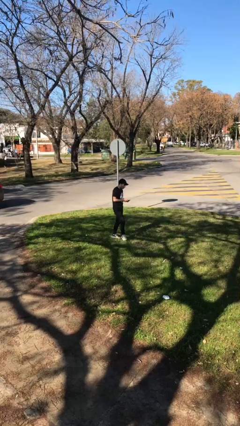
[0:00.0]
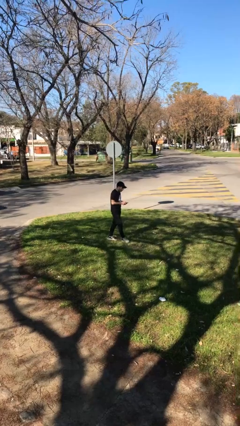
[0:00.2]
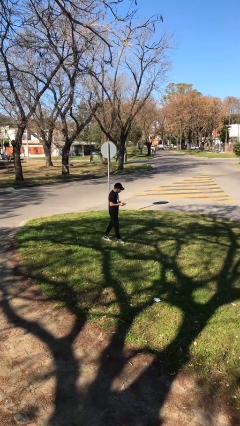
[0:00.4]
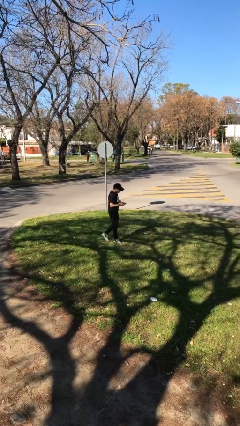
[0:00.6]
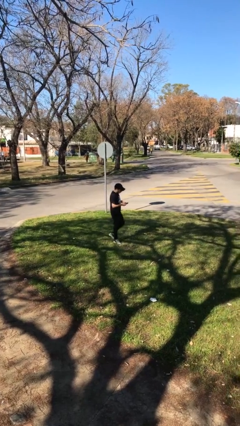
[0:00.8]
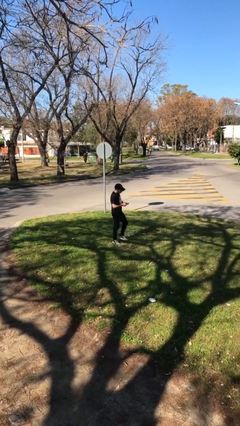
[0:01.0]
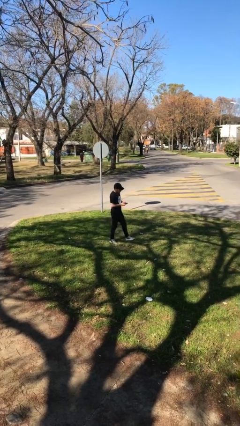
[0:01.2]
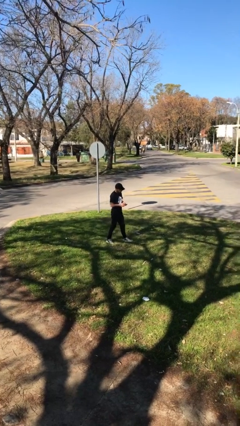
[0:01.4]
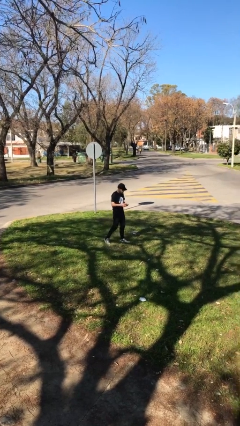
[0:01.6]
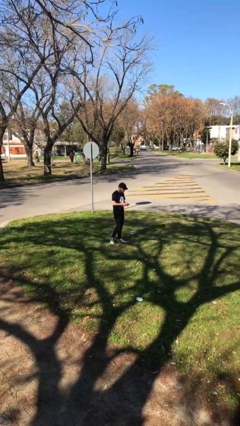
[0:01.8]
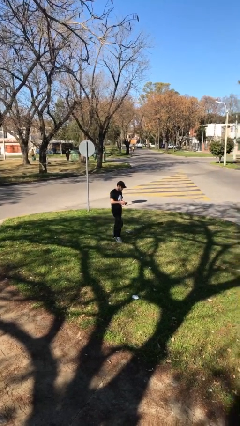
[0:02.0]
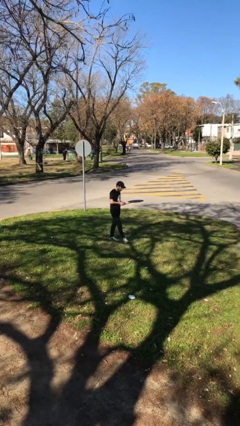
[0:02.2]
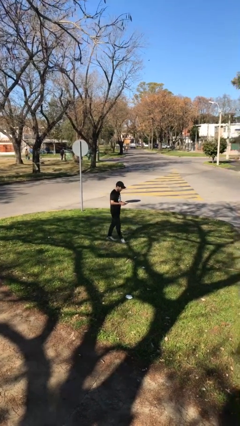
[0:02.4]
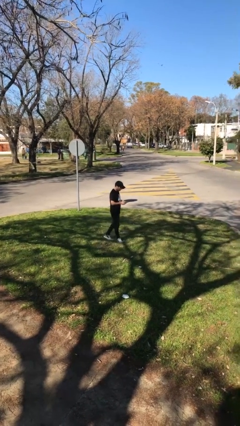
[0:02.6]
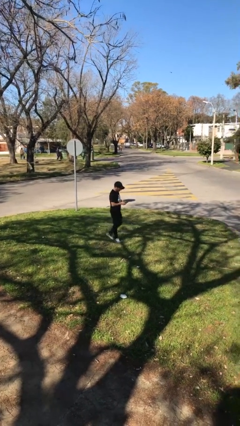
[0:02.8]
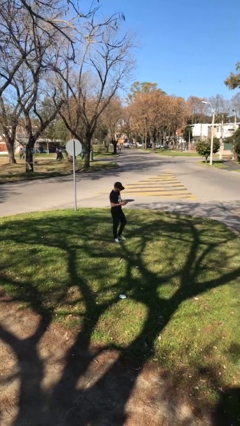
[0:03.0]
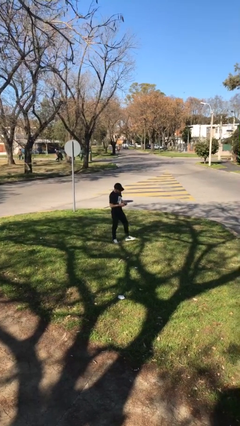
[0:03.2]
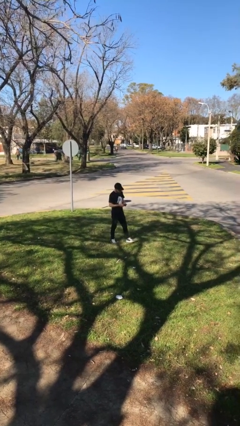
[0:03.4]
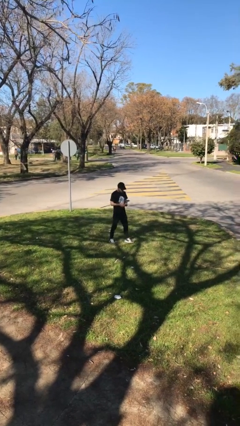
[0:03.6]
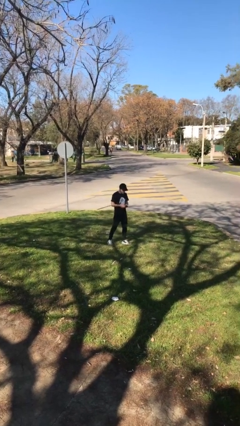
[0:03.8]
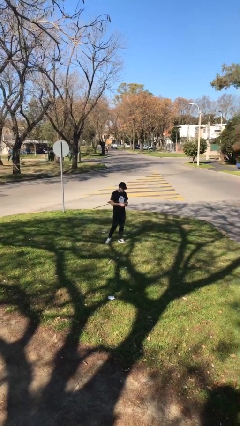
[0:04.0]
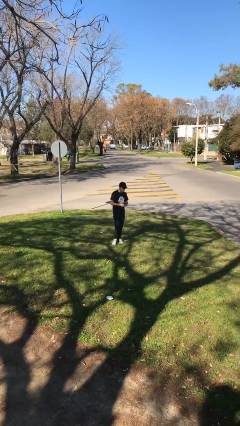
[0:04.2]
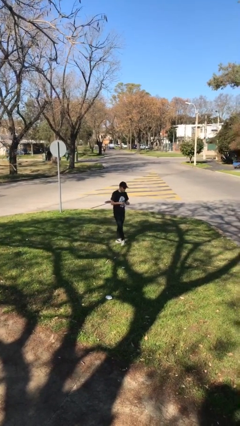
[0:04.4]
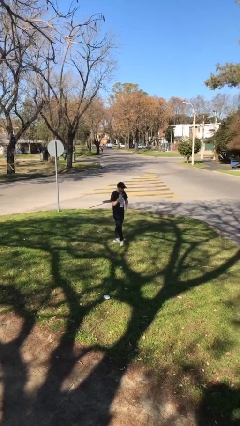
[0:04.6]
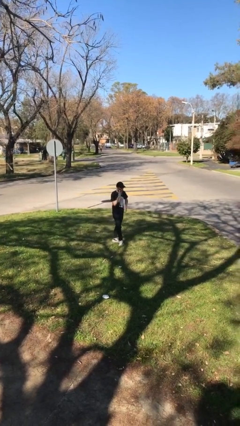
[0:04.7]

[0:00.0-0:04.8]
person texts on phone

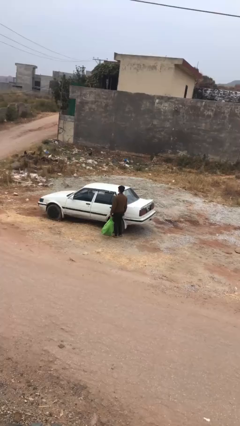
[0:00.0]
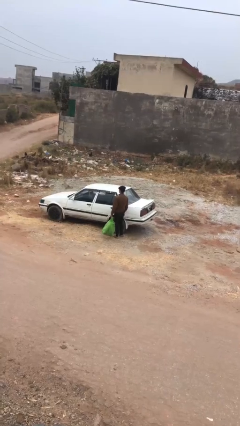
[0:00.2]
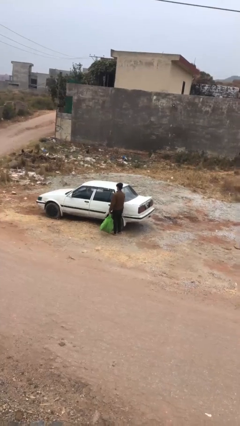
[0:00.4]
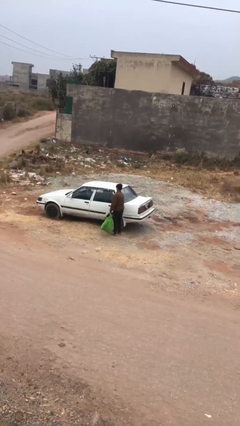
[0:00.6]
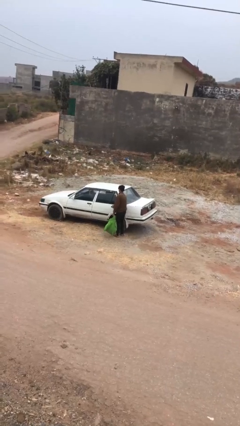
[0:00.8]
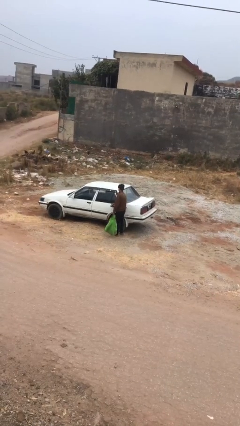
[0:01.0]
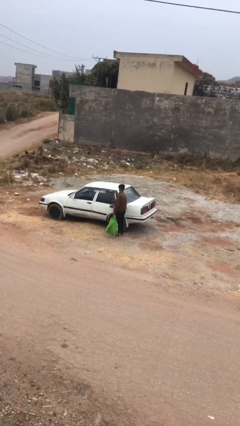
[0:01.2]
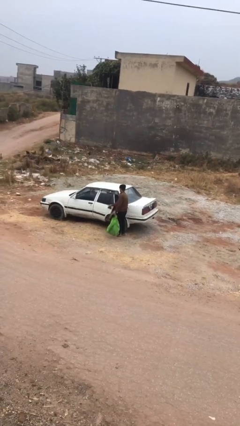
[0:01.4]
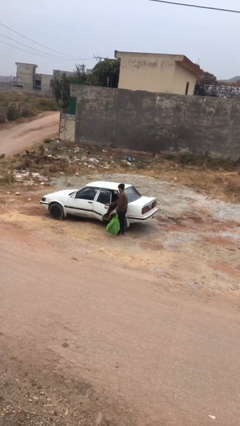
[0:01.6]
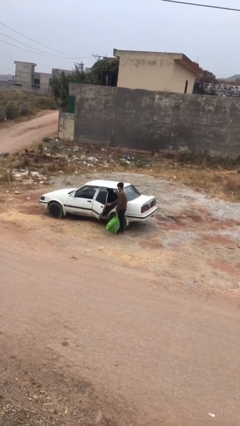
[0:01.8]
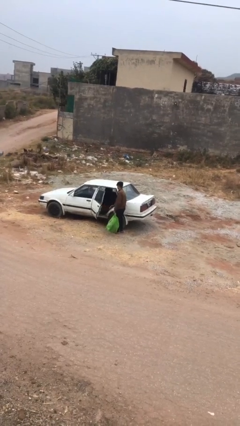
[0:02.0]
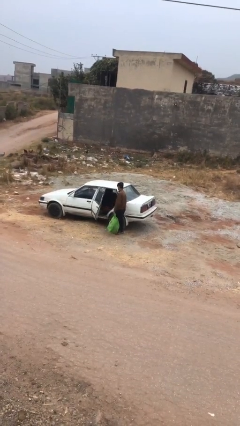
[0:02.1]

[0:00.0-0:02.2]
person opens car door

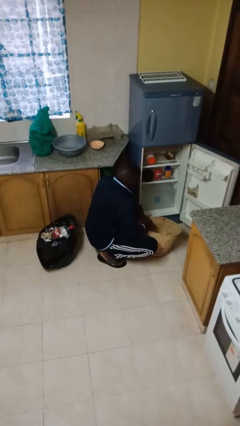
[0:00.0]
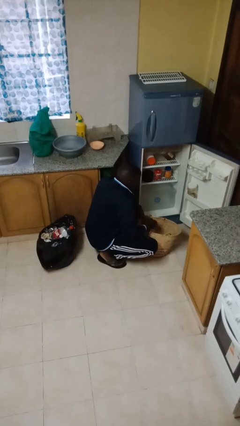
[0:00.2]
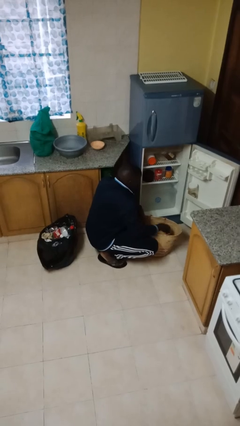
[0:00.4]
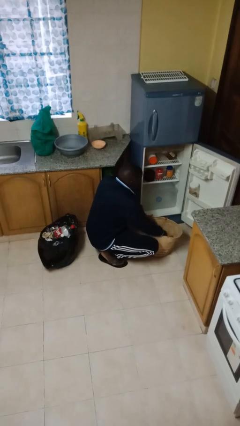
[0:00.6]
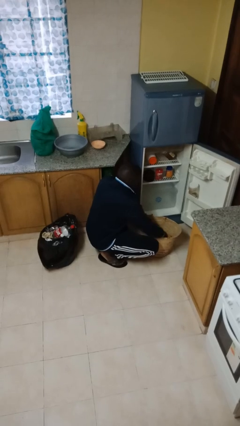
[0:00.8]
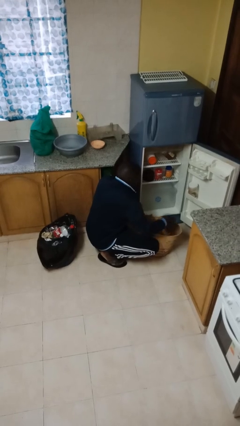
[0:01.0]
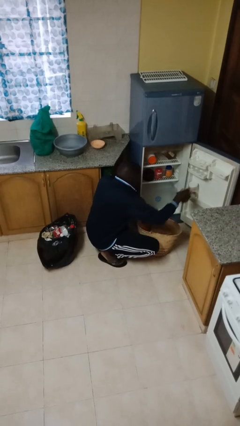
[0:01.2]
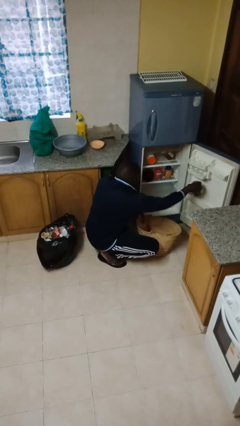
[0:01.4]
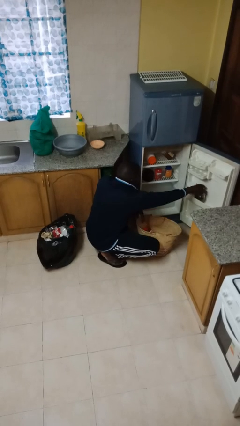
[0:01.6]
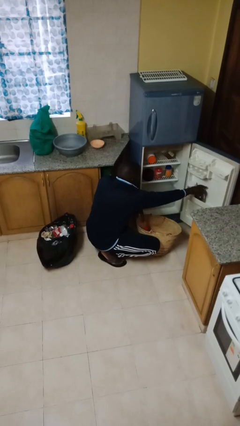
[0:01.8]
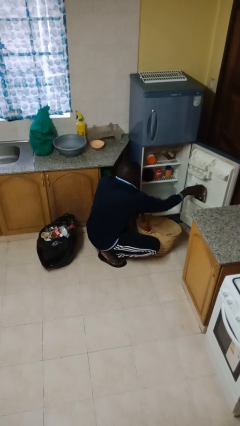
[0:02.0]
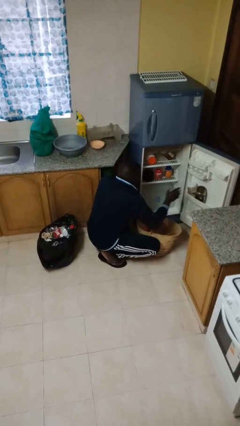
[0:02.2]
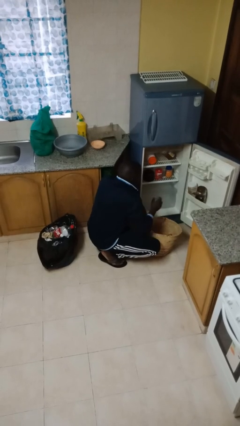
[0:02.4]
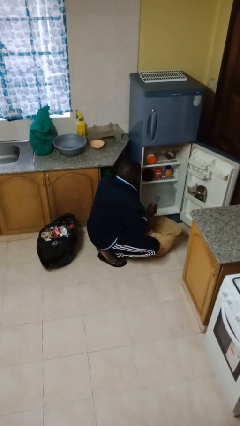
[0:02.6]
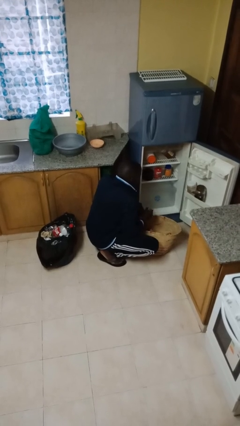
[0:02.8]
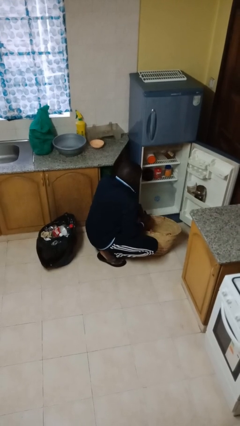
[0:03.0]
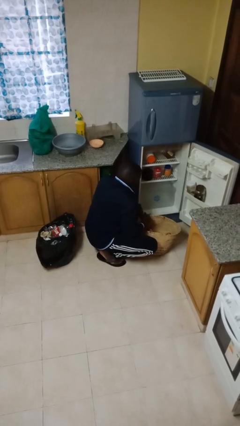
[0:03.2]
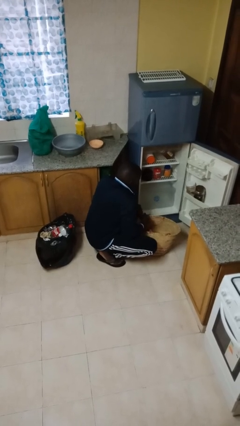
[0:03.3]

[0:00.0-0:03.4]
person loads groceries into refrigerator

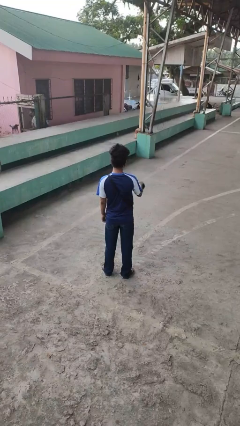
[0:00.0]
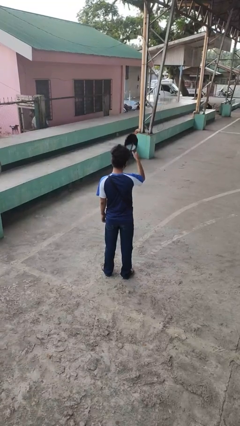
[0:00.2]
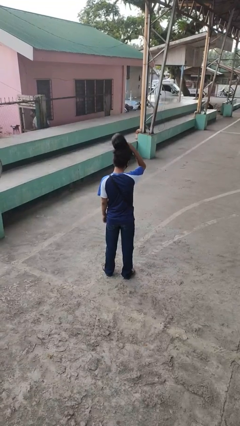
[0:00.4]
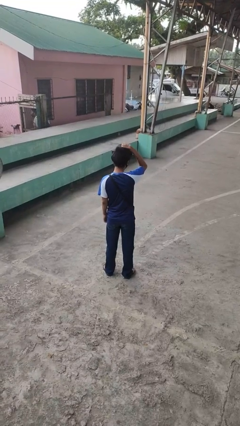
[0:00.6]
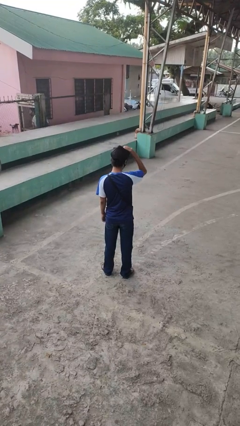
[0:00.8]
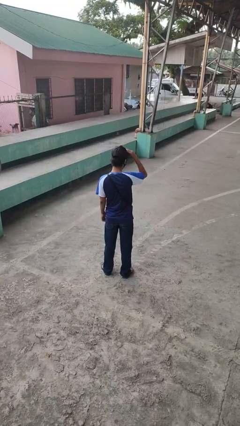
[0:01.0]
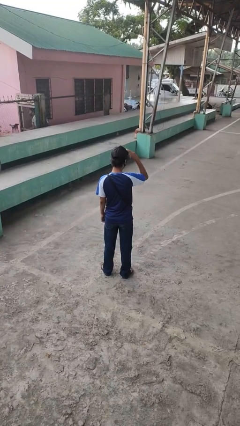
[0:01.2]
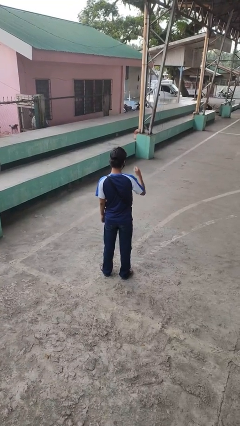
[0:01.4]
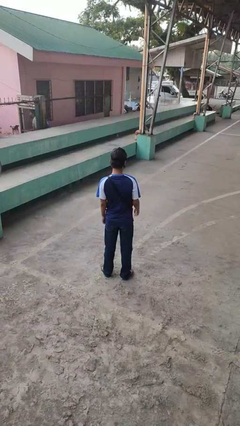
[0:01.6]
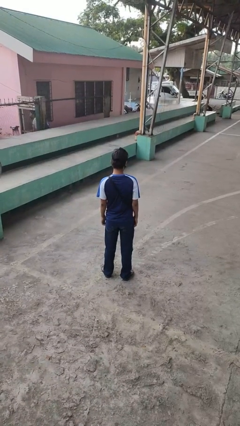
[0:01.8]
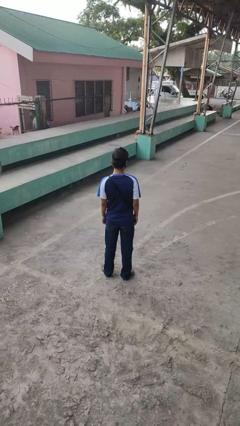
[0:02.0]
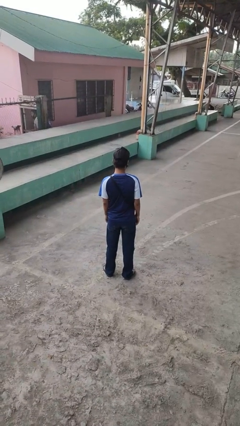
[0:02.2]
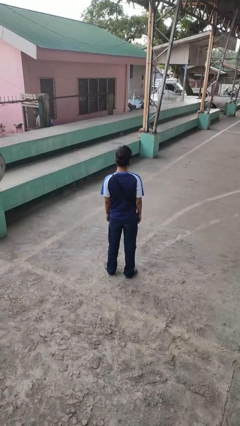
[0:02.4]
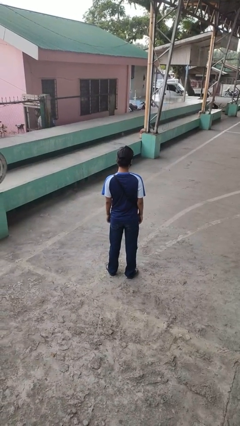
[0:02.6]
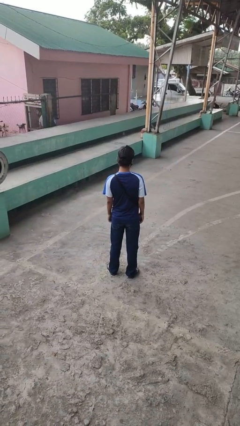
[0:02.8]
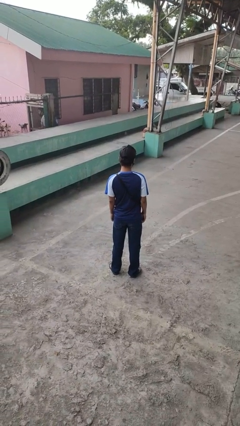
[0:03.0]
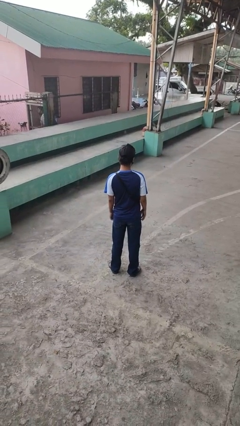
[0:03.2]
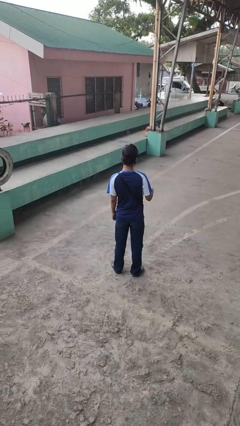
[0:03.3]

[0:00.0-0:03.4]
person puts on hat

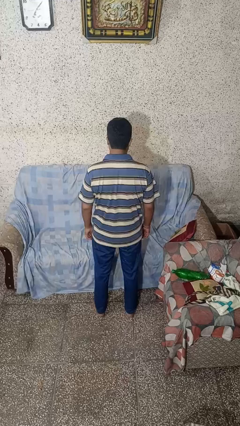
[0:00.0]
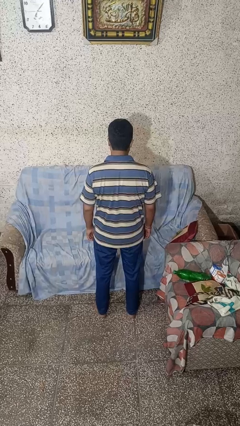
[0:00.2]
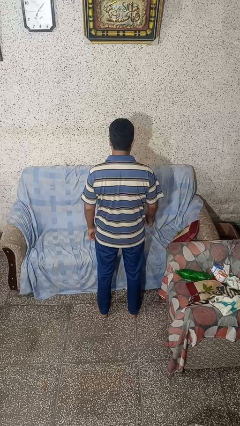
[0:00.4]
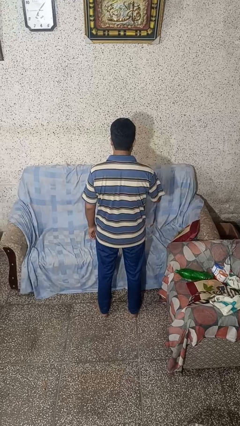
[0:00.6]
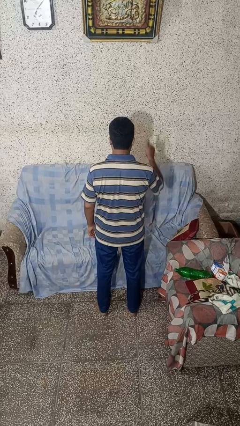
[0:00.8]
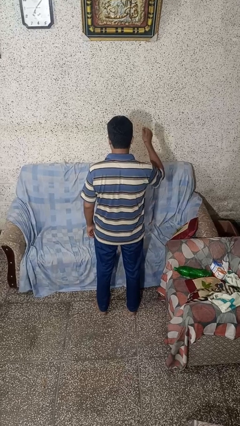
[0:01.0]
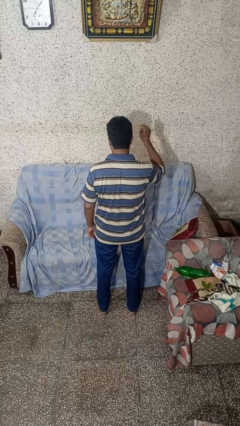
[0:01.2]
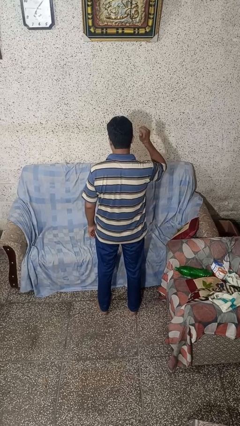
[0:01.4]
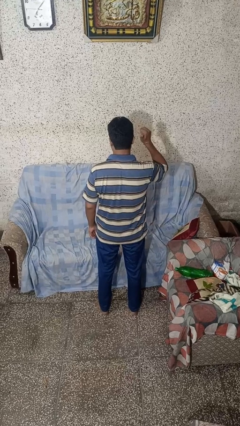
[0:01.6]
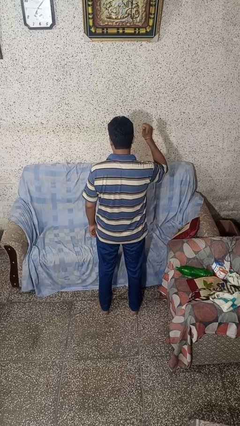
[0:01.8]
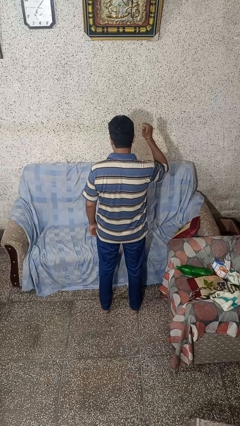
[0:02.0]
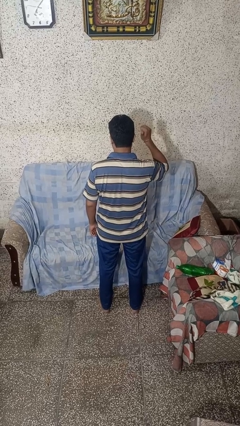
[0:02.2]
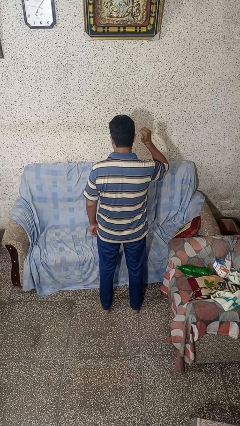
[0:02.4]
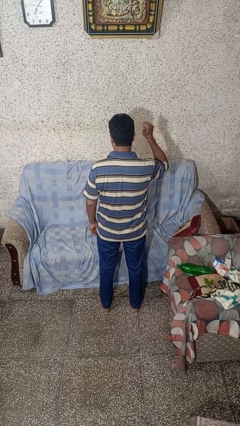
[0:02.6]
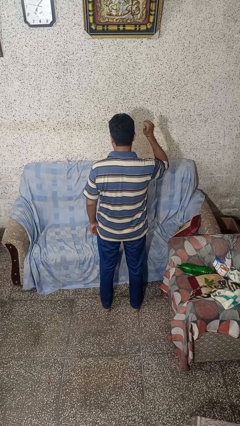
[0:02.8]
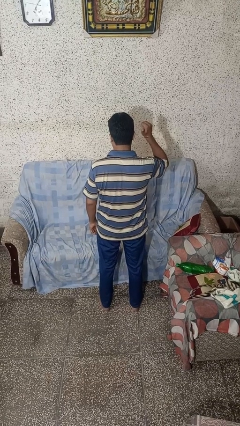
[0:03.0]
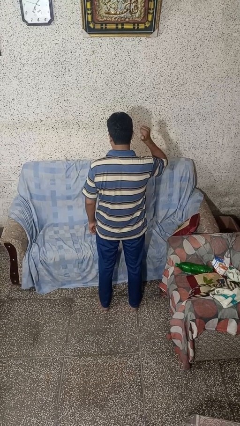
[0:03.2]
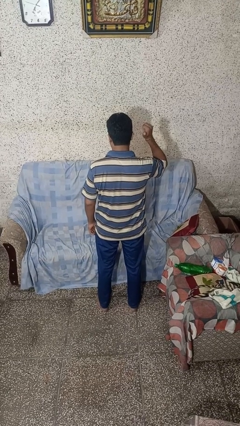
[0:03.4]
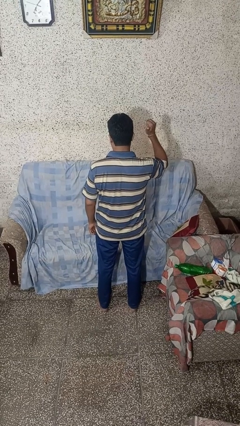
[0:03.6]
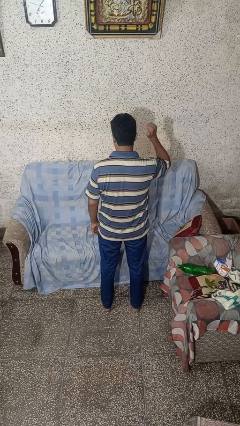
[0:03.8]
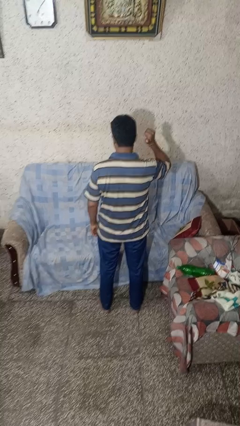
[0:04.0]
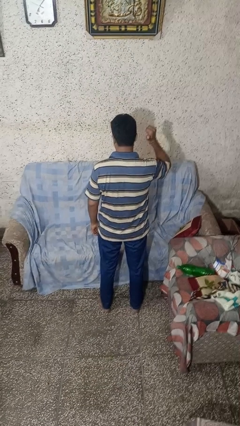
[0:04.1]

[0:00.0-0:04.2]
person gestures behind me
